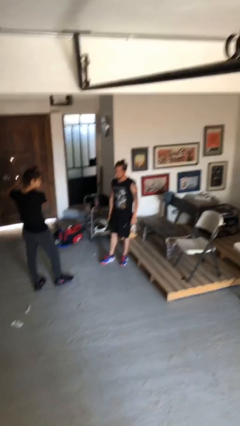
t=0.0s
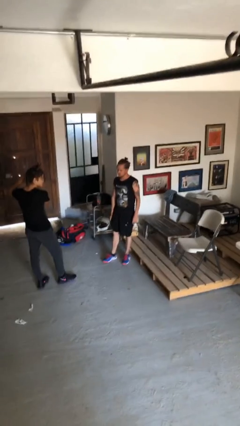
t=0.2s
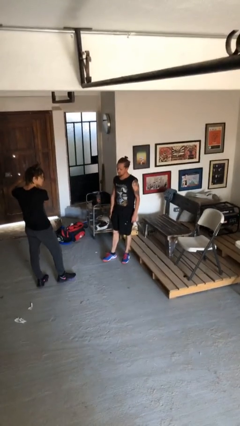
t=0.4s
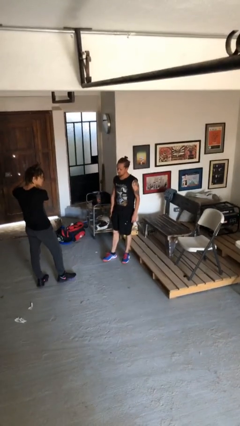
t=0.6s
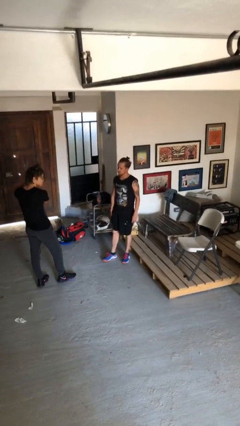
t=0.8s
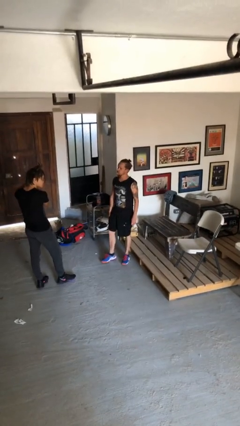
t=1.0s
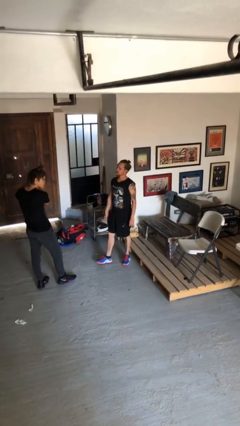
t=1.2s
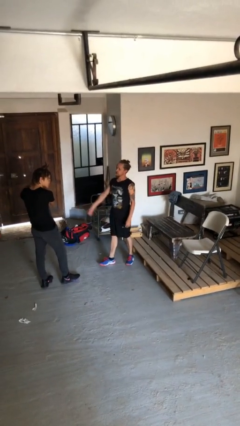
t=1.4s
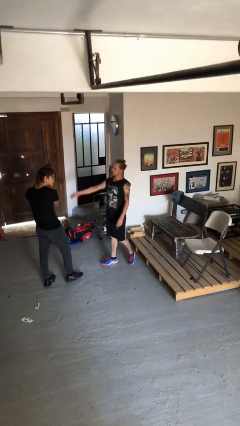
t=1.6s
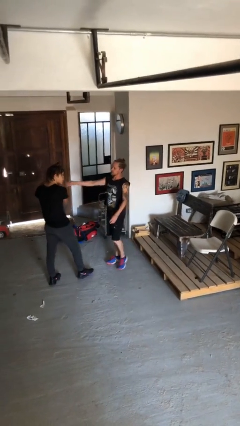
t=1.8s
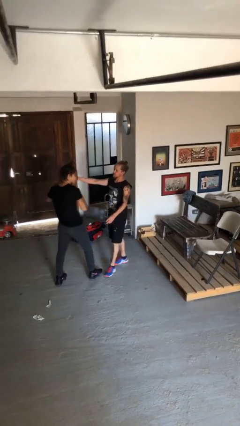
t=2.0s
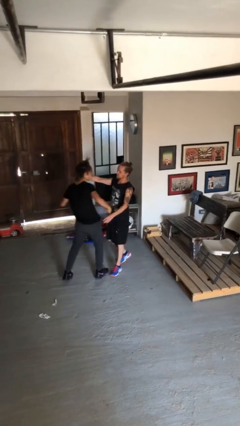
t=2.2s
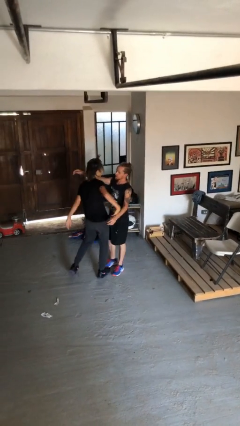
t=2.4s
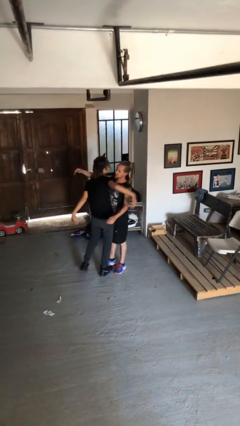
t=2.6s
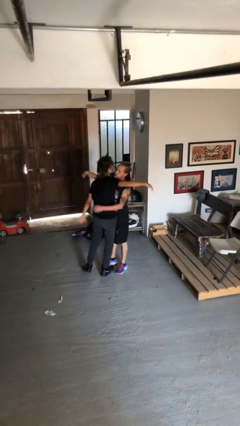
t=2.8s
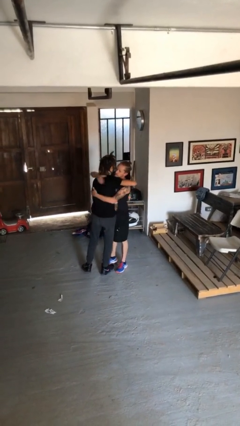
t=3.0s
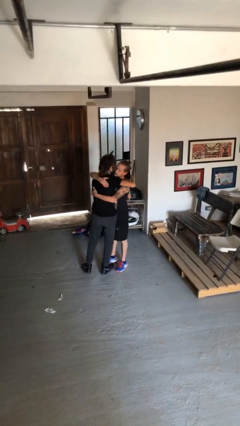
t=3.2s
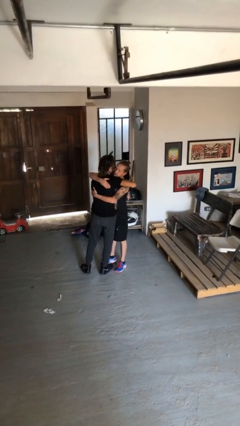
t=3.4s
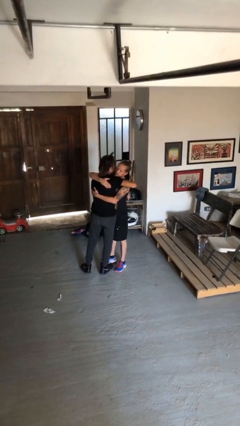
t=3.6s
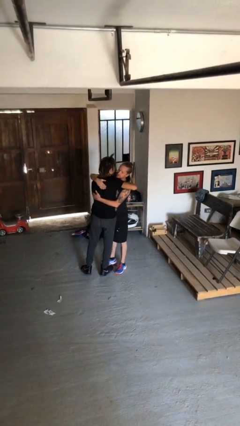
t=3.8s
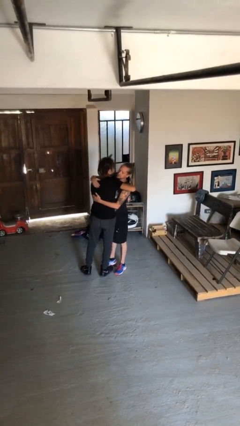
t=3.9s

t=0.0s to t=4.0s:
person embraces person

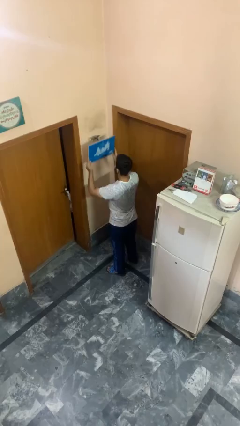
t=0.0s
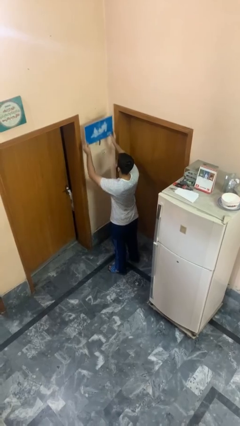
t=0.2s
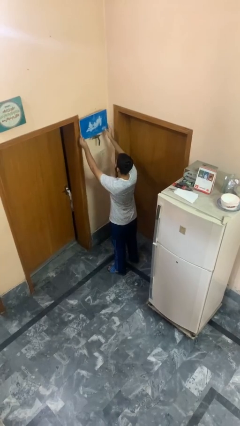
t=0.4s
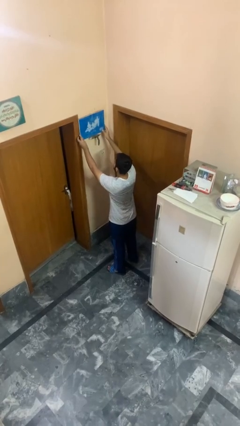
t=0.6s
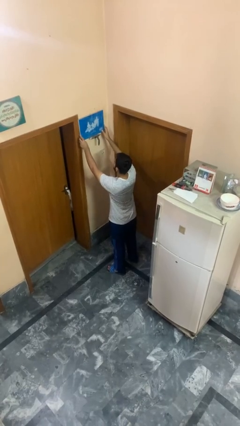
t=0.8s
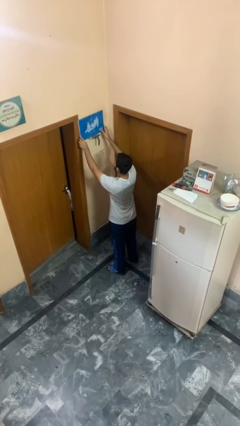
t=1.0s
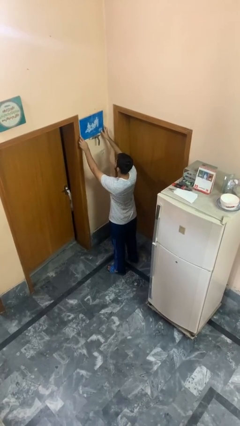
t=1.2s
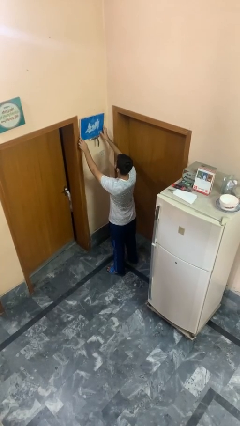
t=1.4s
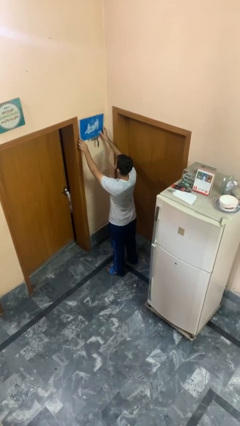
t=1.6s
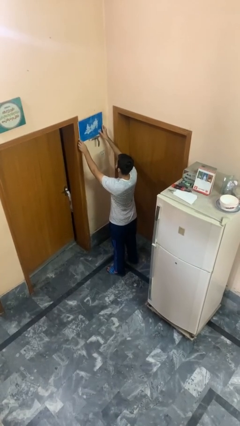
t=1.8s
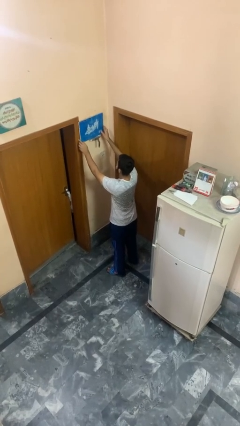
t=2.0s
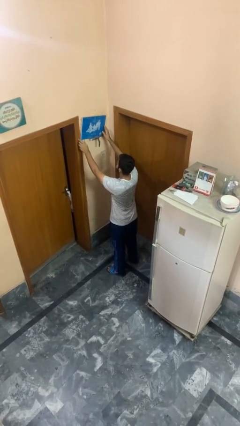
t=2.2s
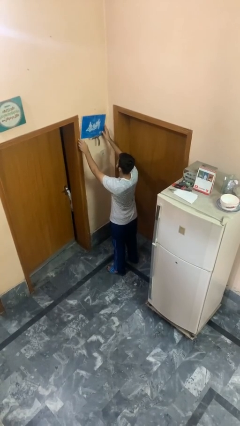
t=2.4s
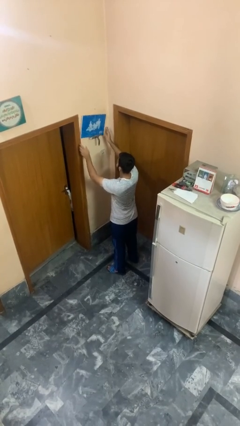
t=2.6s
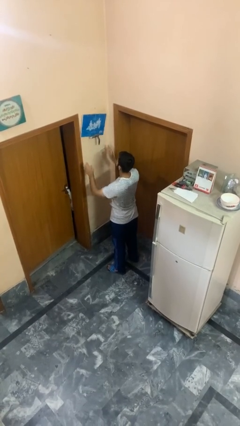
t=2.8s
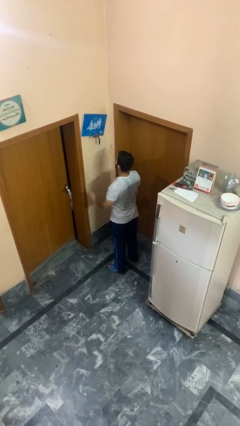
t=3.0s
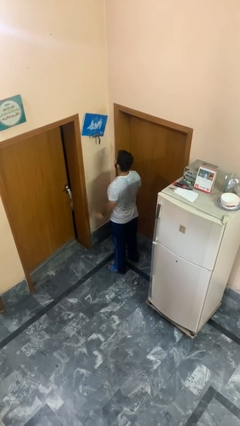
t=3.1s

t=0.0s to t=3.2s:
person puts up picture frame

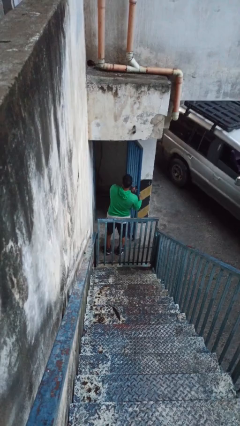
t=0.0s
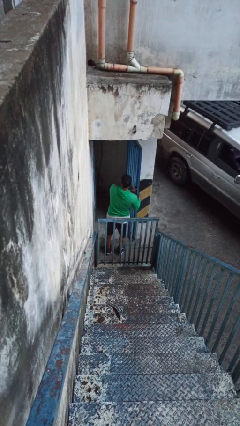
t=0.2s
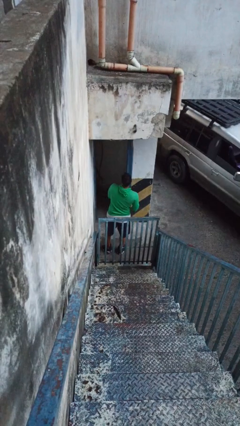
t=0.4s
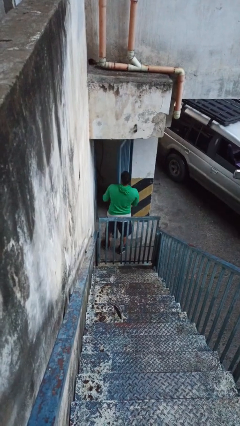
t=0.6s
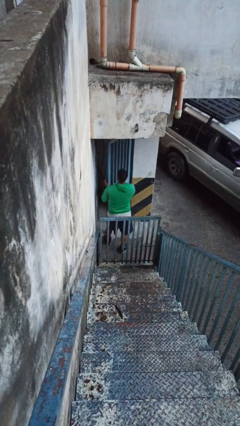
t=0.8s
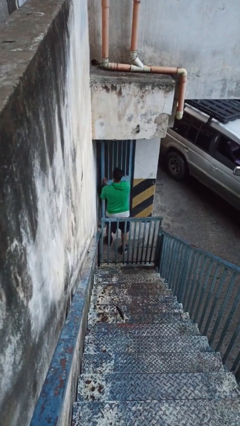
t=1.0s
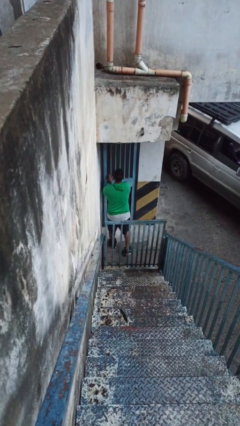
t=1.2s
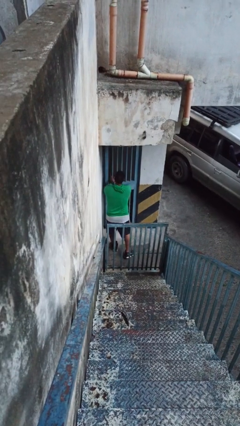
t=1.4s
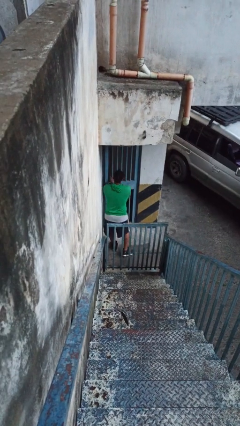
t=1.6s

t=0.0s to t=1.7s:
person closes facility door

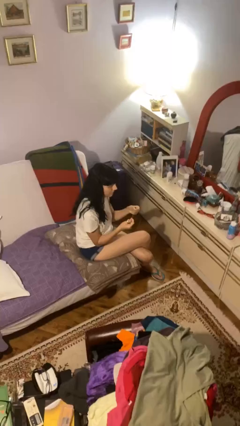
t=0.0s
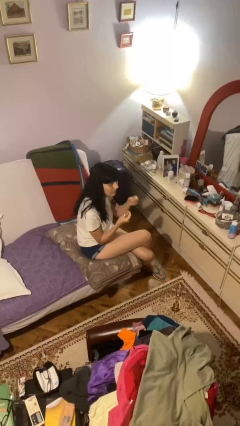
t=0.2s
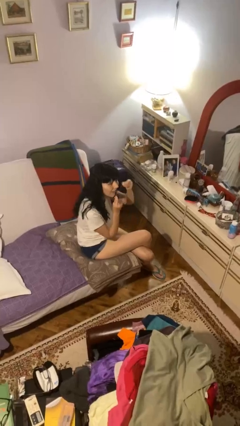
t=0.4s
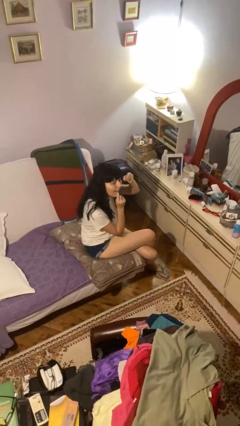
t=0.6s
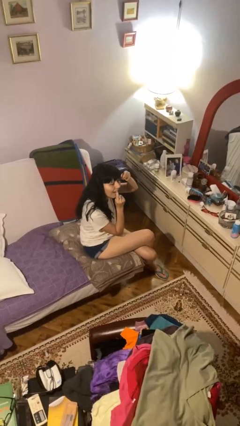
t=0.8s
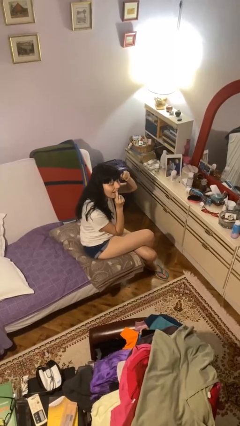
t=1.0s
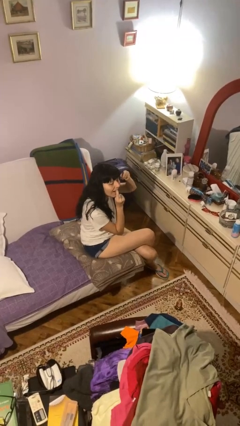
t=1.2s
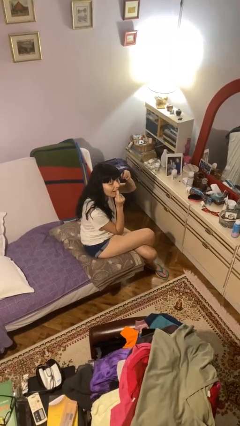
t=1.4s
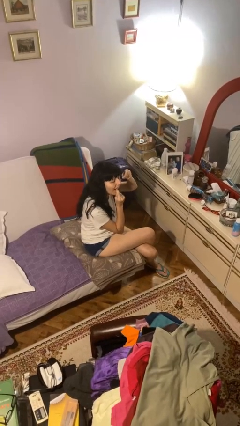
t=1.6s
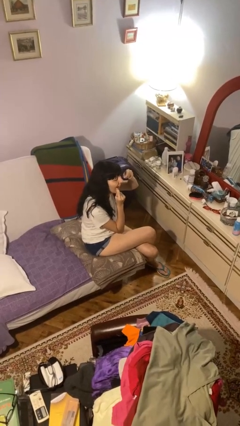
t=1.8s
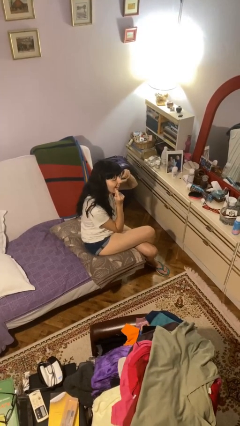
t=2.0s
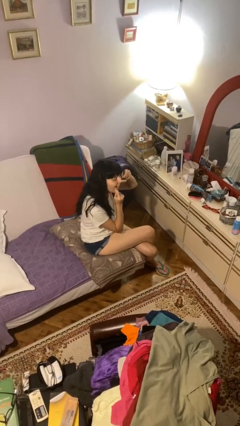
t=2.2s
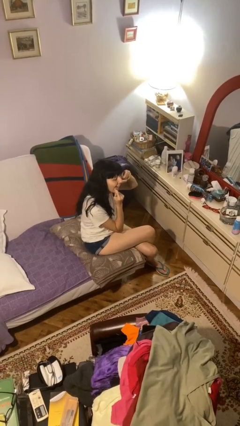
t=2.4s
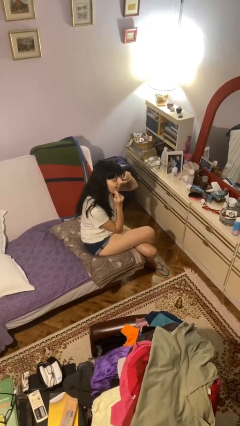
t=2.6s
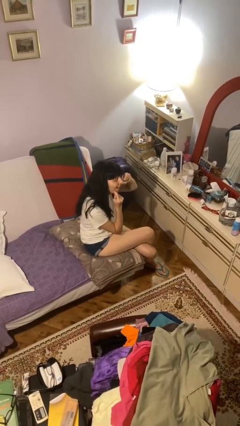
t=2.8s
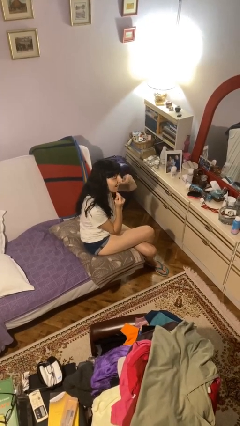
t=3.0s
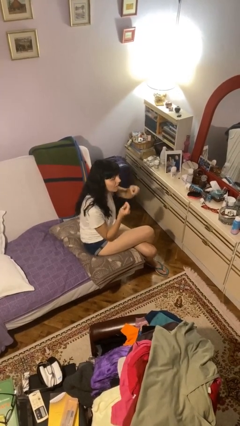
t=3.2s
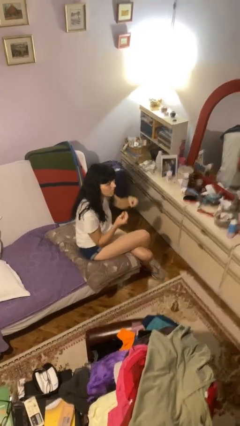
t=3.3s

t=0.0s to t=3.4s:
person flosses

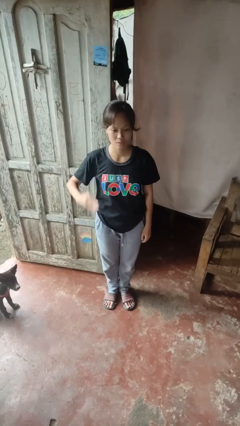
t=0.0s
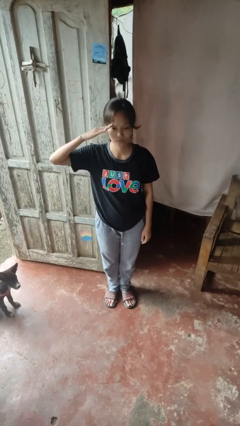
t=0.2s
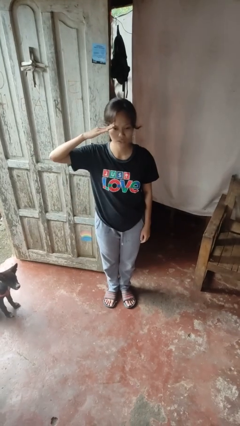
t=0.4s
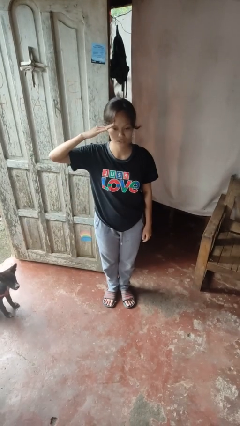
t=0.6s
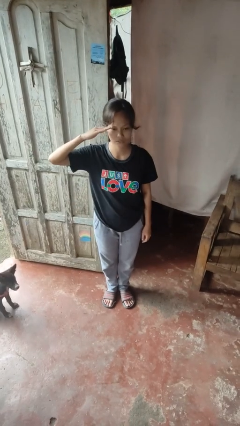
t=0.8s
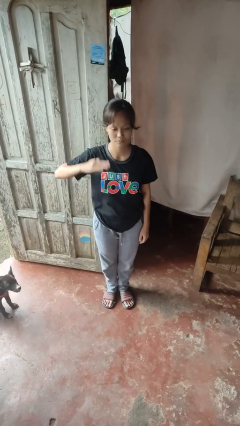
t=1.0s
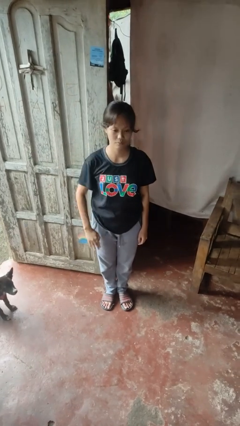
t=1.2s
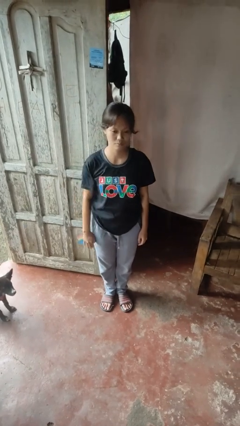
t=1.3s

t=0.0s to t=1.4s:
person salutes

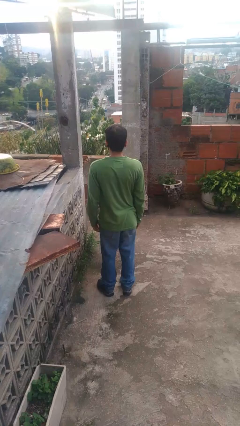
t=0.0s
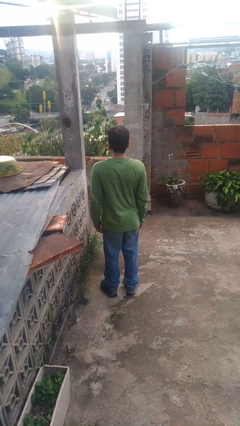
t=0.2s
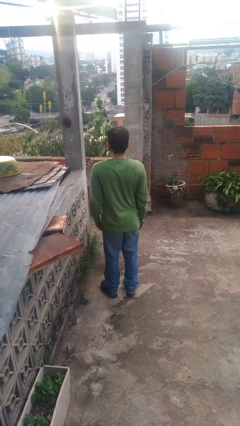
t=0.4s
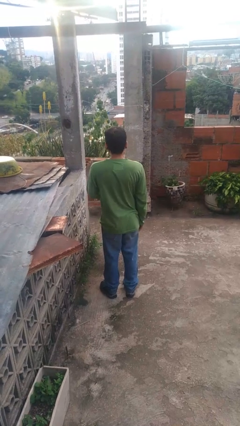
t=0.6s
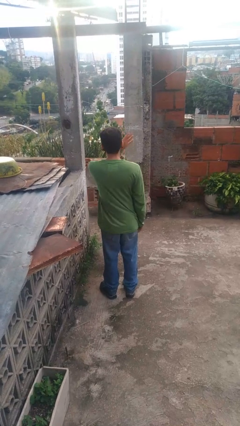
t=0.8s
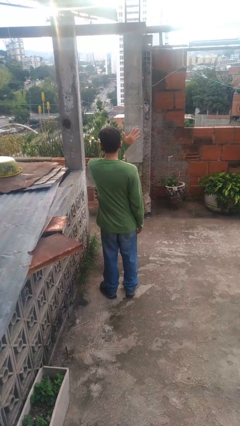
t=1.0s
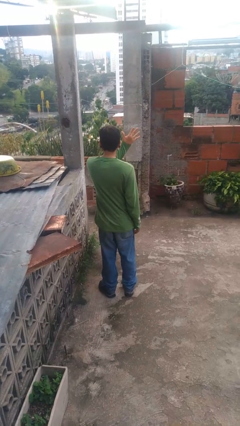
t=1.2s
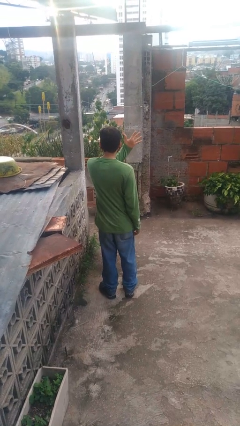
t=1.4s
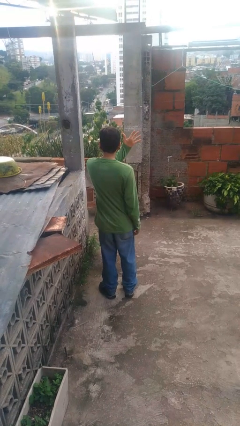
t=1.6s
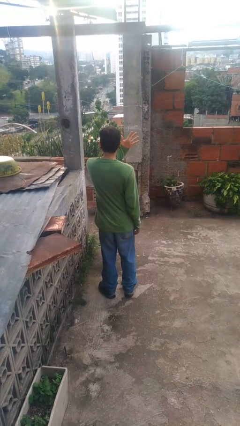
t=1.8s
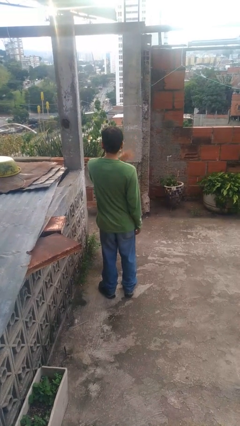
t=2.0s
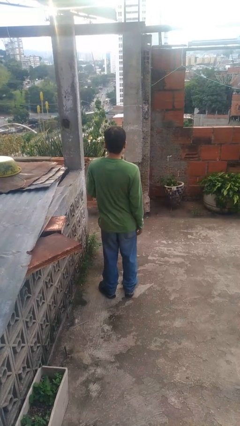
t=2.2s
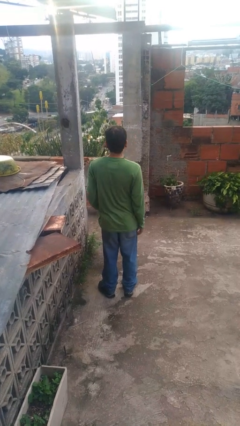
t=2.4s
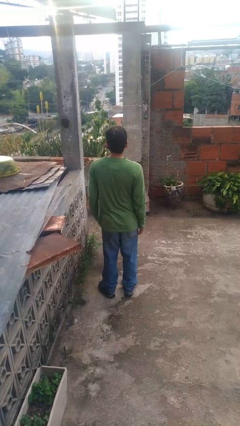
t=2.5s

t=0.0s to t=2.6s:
person gestures number five

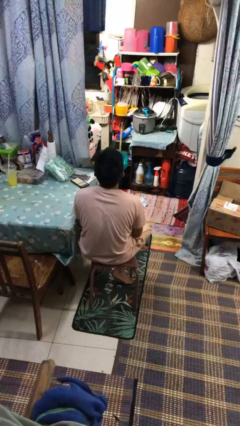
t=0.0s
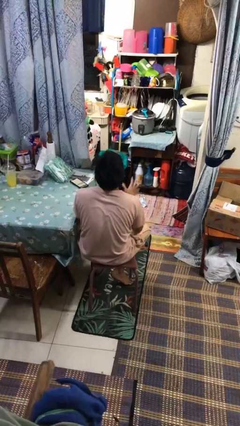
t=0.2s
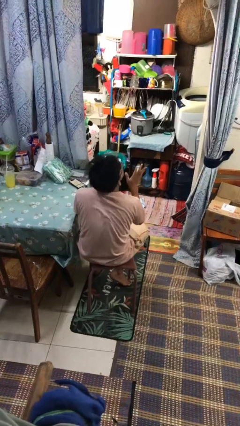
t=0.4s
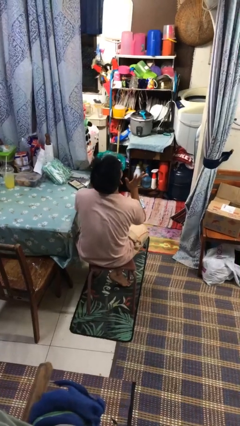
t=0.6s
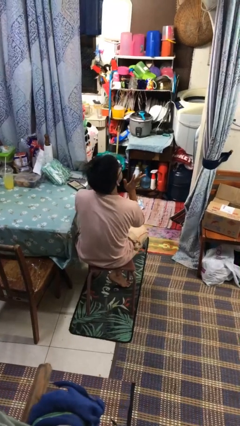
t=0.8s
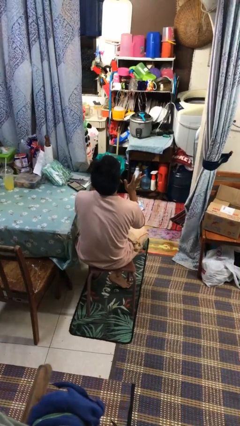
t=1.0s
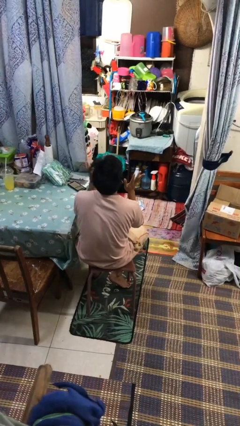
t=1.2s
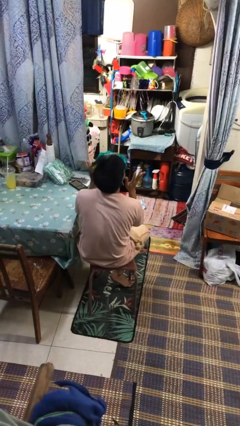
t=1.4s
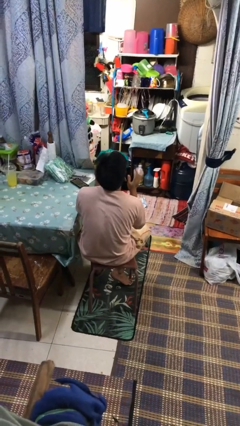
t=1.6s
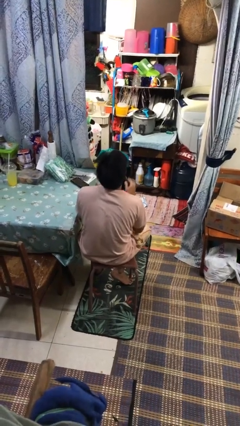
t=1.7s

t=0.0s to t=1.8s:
person sticks out tongue
